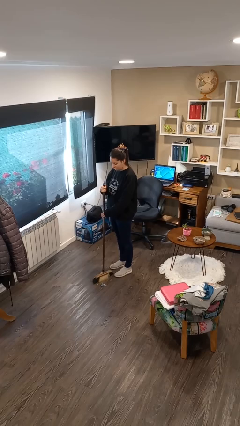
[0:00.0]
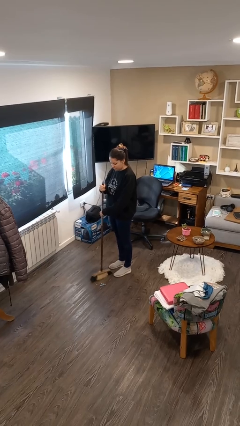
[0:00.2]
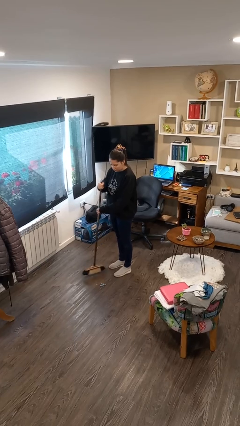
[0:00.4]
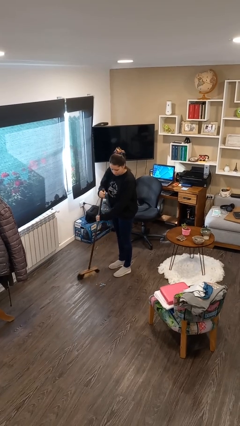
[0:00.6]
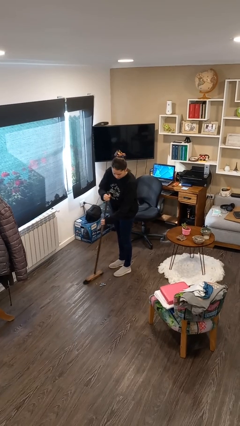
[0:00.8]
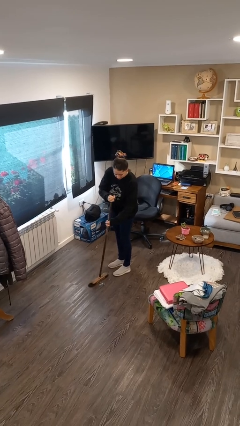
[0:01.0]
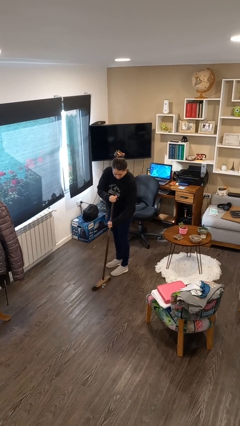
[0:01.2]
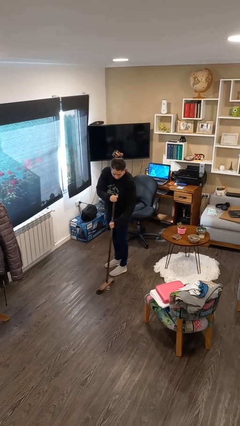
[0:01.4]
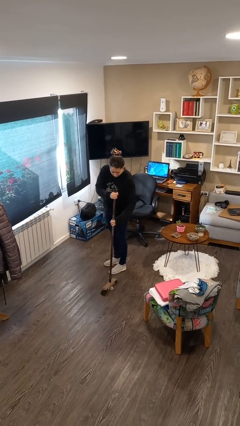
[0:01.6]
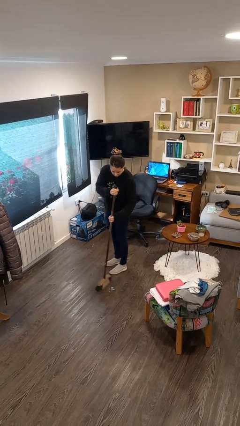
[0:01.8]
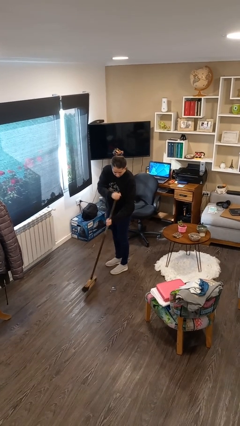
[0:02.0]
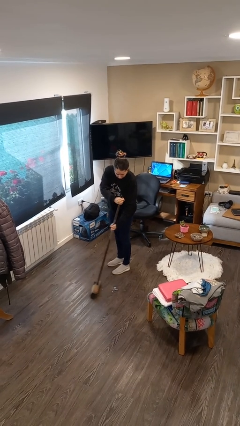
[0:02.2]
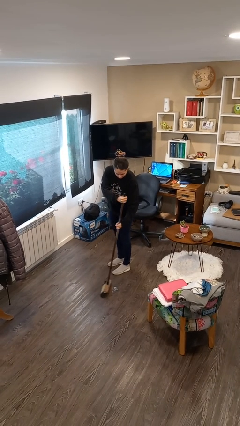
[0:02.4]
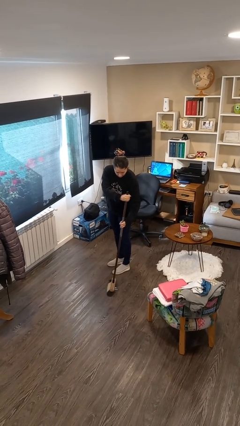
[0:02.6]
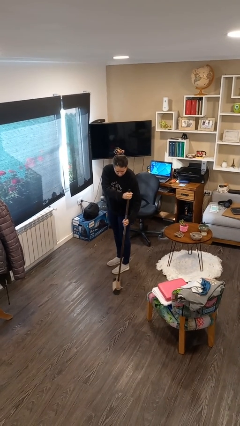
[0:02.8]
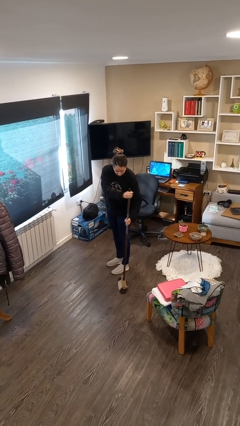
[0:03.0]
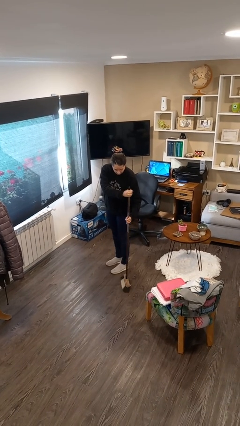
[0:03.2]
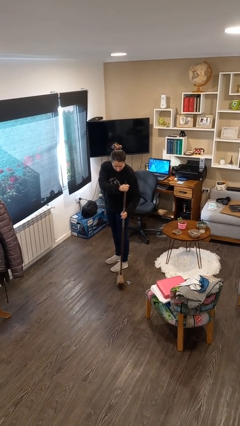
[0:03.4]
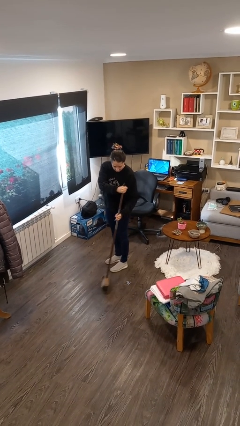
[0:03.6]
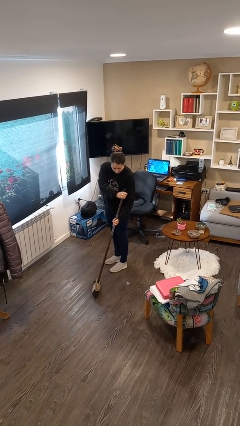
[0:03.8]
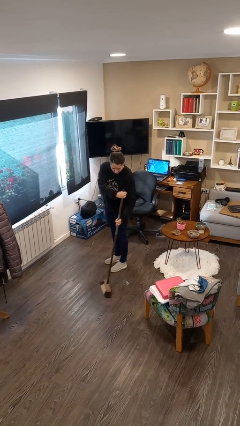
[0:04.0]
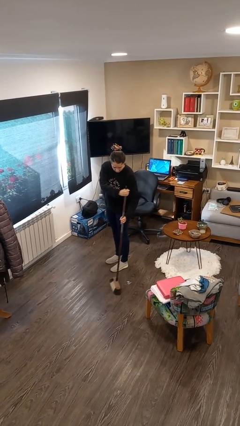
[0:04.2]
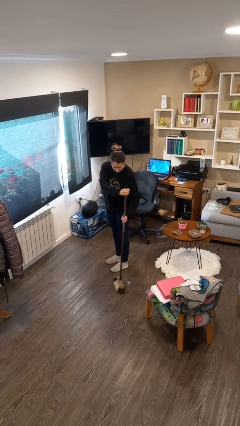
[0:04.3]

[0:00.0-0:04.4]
person sweeps floor

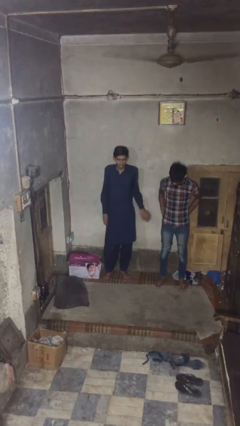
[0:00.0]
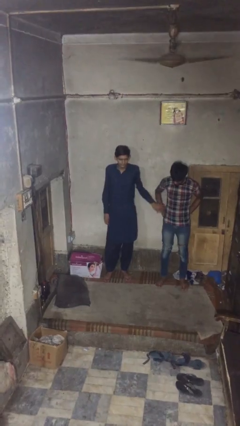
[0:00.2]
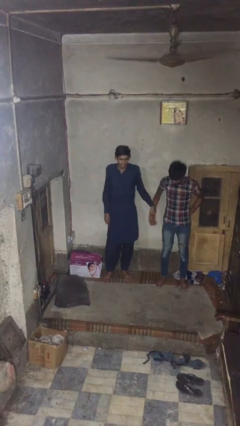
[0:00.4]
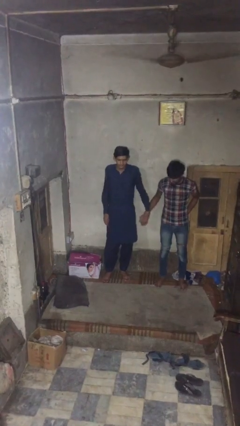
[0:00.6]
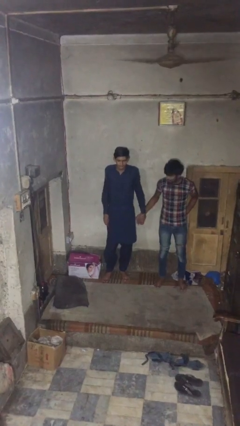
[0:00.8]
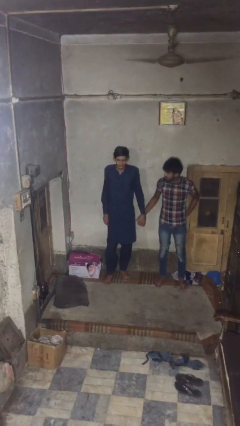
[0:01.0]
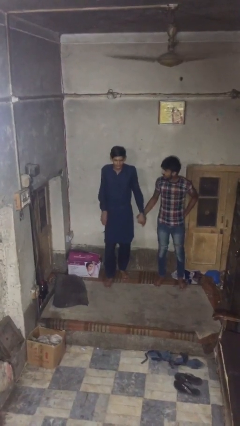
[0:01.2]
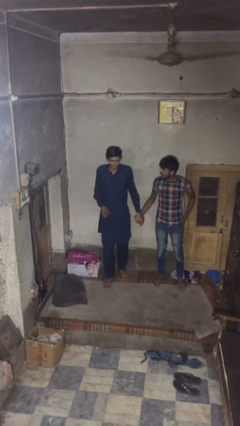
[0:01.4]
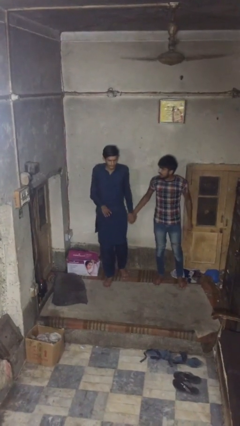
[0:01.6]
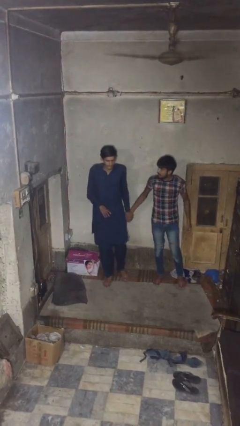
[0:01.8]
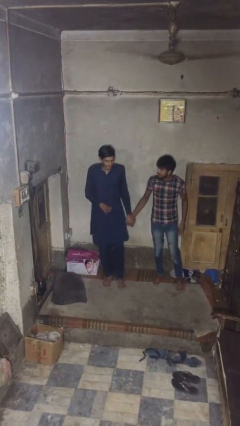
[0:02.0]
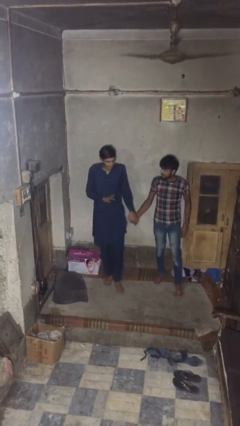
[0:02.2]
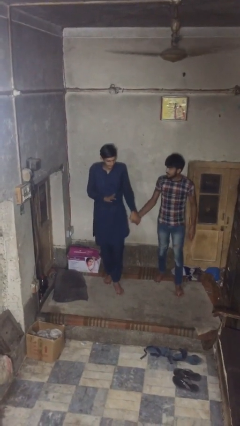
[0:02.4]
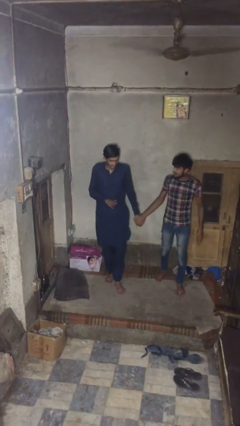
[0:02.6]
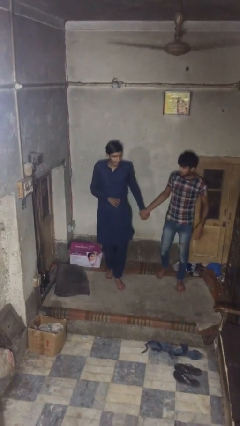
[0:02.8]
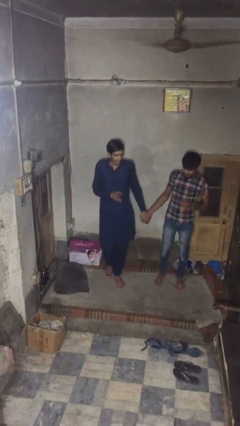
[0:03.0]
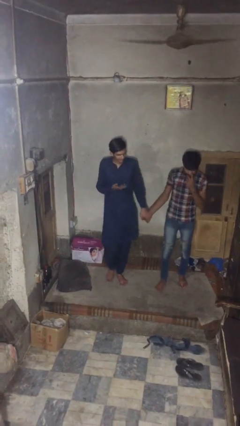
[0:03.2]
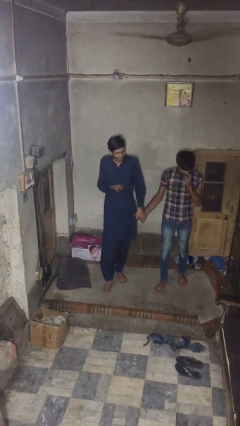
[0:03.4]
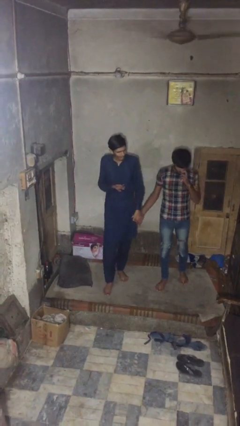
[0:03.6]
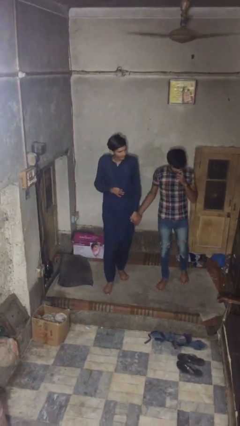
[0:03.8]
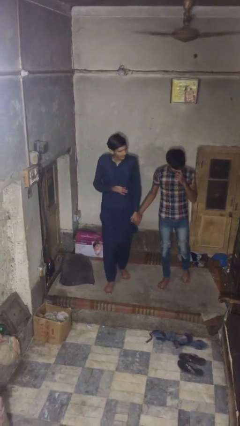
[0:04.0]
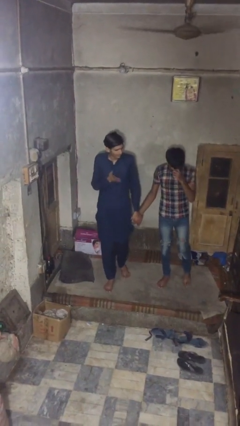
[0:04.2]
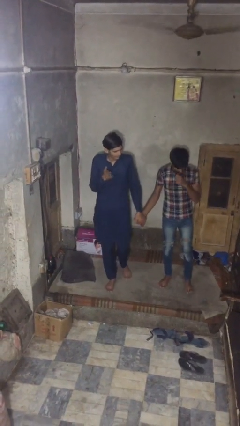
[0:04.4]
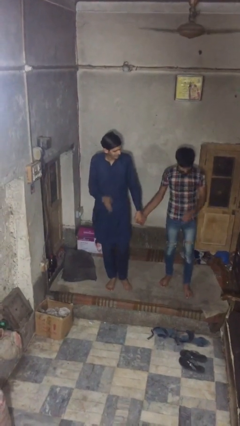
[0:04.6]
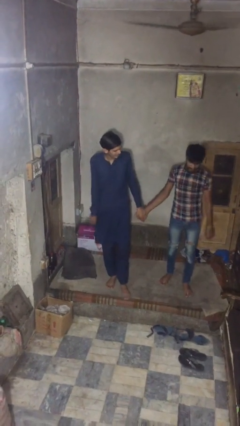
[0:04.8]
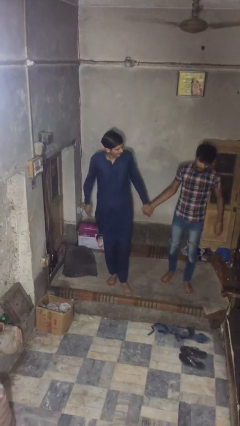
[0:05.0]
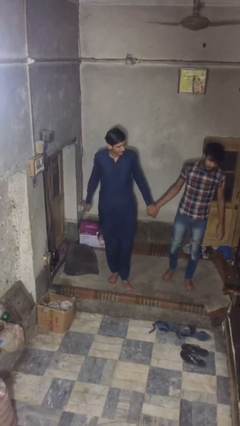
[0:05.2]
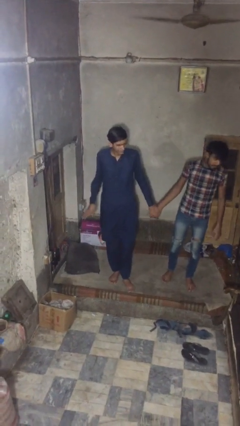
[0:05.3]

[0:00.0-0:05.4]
person holds hand

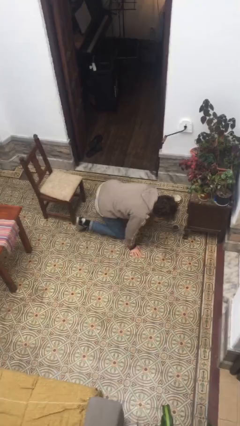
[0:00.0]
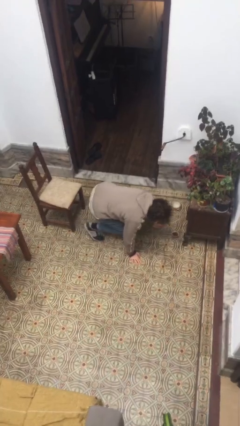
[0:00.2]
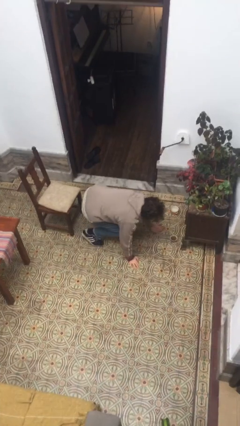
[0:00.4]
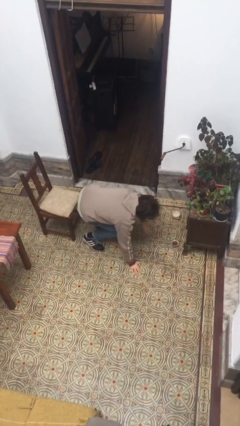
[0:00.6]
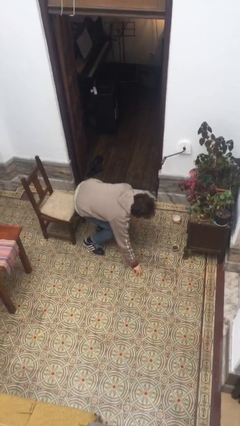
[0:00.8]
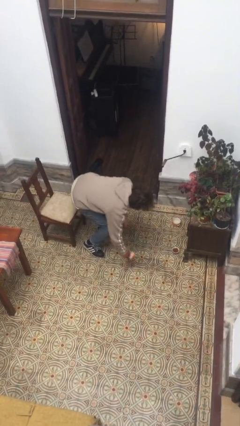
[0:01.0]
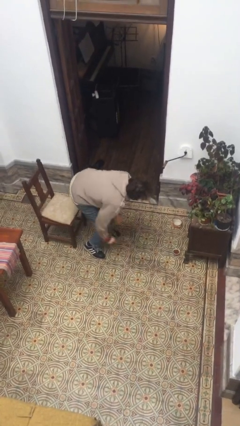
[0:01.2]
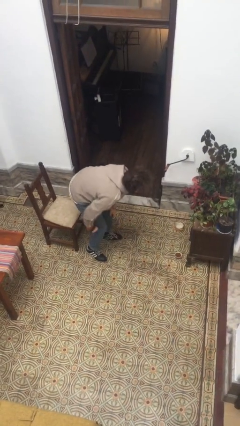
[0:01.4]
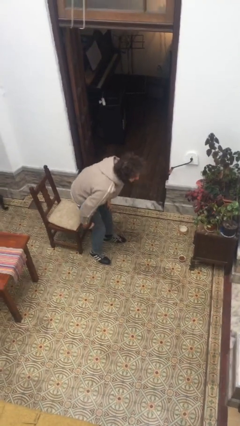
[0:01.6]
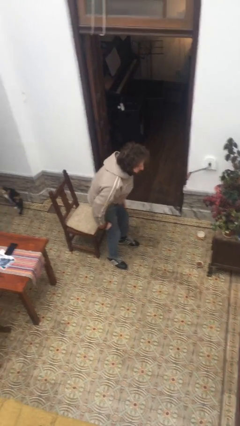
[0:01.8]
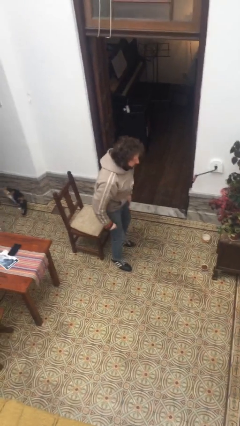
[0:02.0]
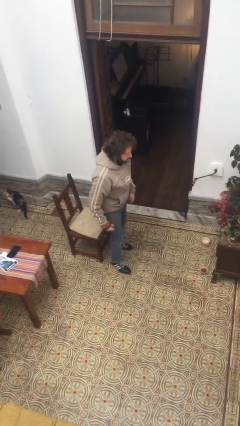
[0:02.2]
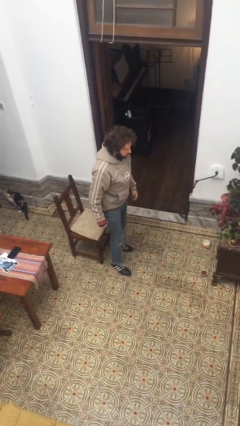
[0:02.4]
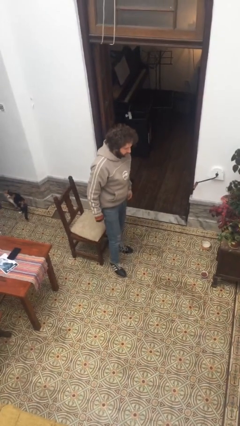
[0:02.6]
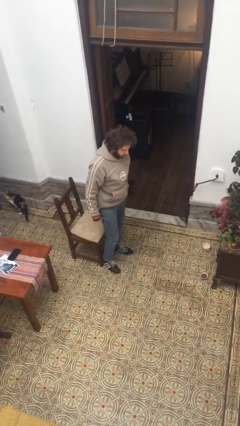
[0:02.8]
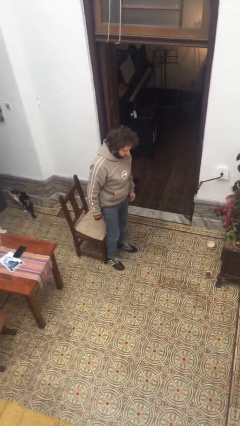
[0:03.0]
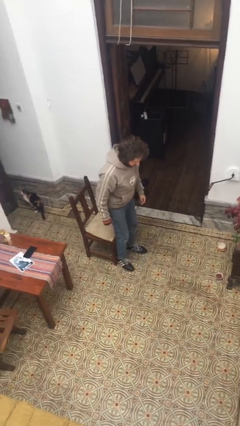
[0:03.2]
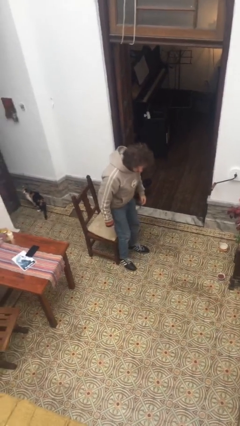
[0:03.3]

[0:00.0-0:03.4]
person stands up from floor

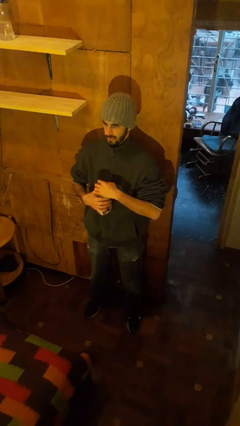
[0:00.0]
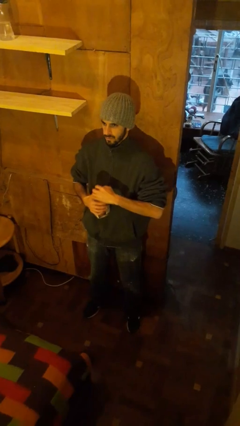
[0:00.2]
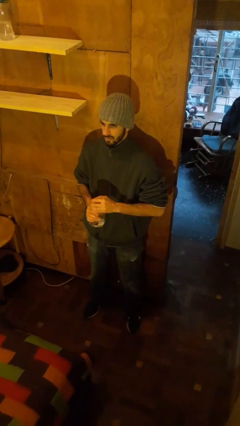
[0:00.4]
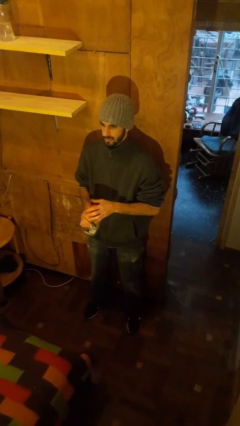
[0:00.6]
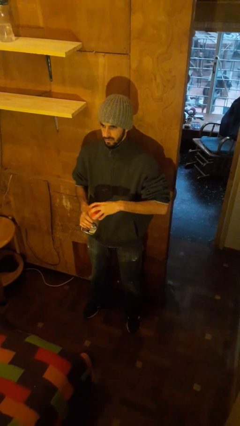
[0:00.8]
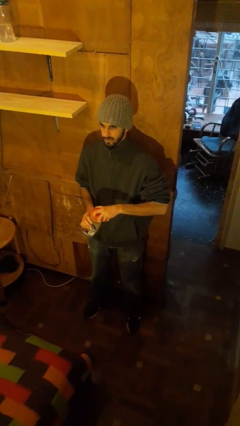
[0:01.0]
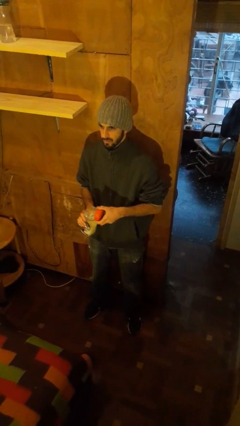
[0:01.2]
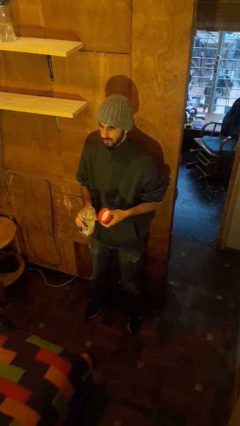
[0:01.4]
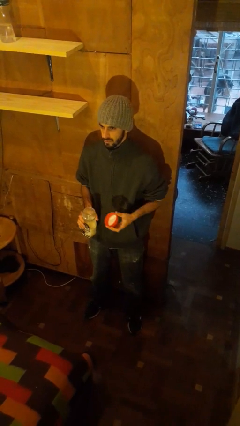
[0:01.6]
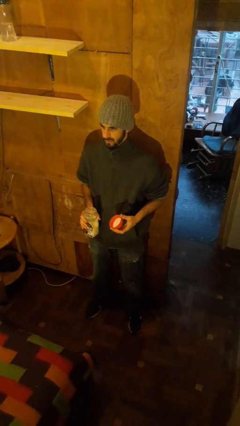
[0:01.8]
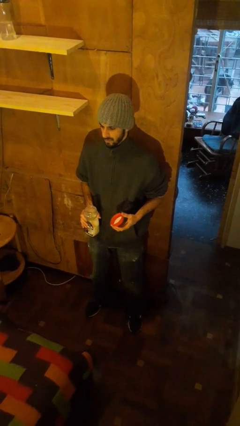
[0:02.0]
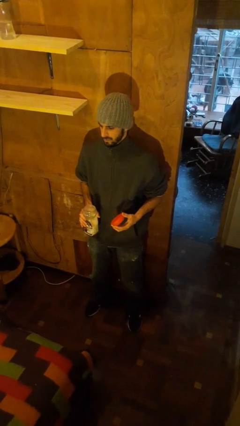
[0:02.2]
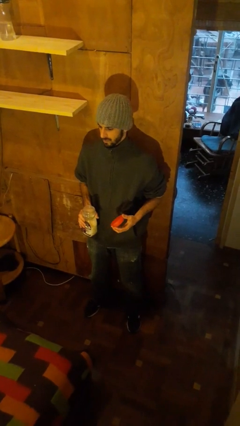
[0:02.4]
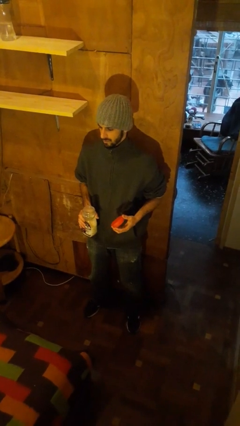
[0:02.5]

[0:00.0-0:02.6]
person opens jar

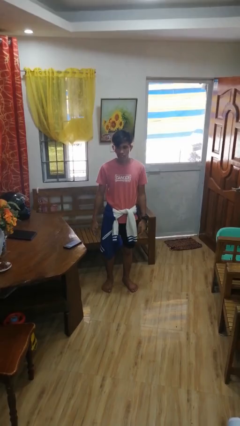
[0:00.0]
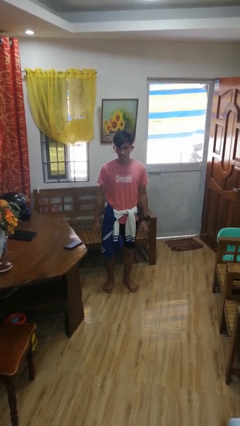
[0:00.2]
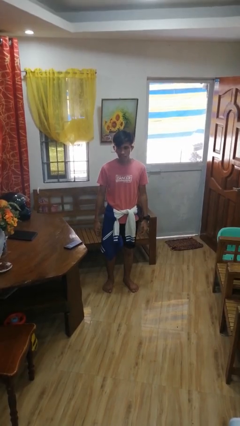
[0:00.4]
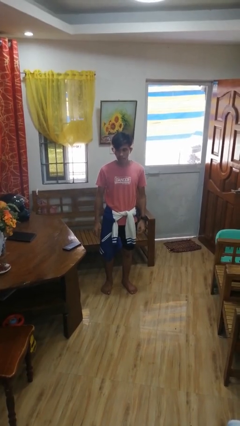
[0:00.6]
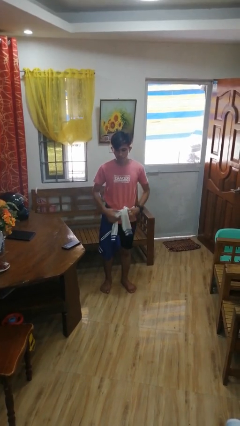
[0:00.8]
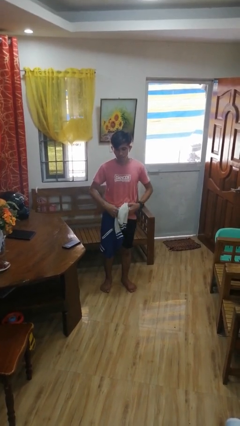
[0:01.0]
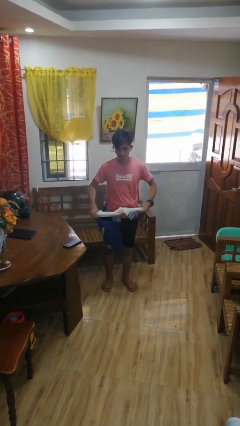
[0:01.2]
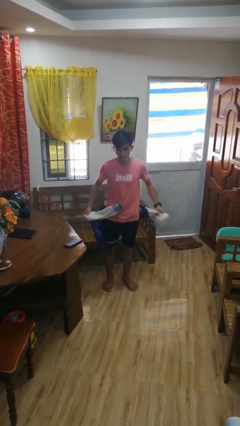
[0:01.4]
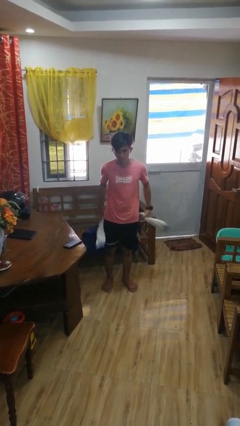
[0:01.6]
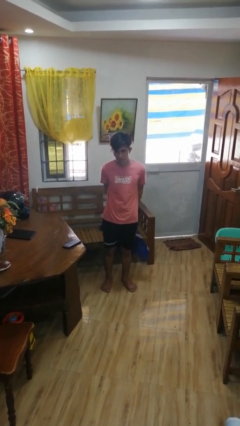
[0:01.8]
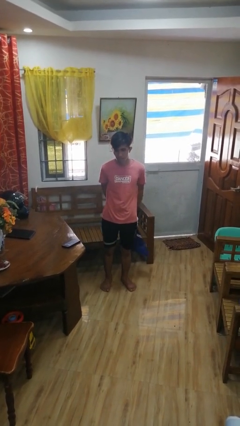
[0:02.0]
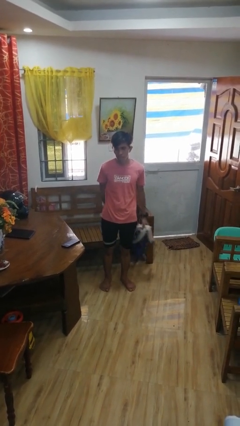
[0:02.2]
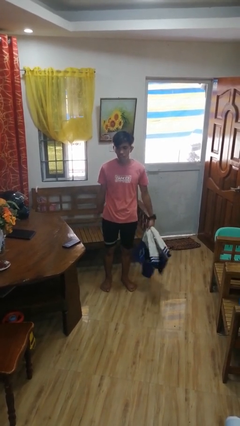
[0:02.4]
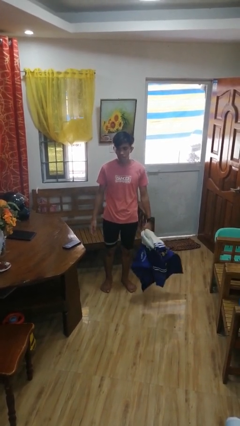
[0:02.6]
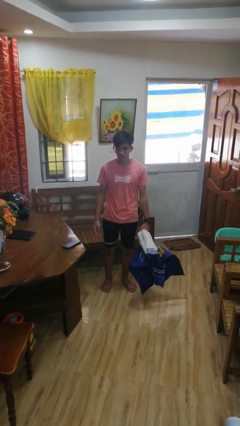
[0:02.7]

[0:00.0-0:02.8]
person unties jacket around waist
